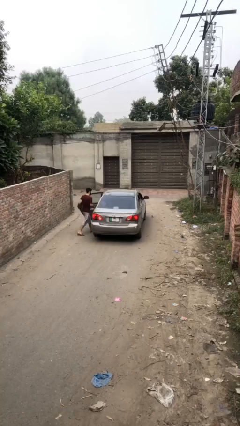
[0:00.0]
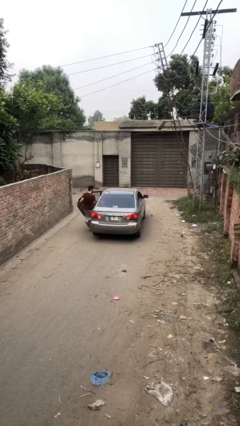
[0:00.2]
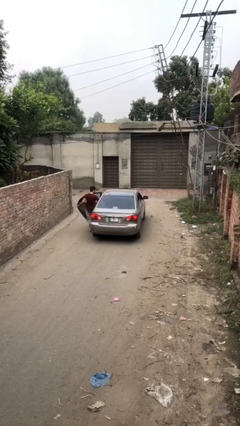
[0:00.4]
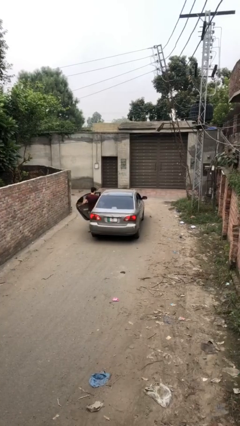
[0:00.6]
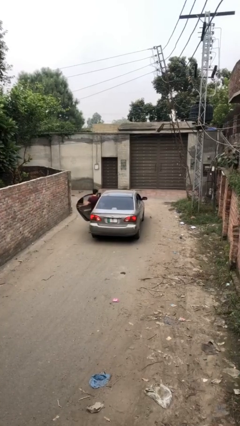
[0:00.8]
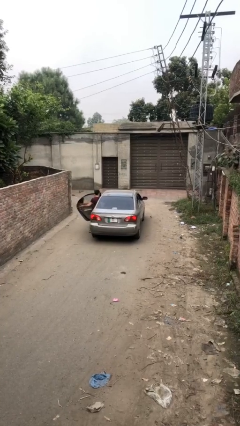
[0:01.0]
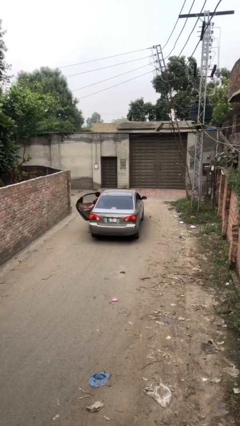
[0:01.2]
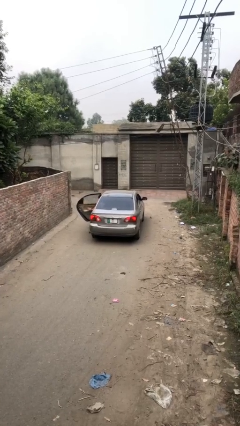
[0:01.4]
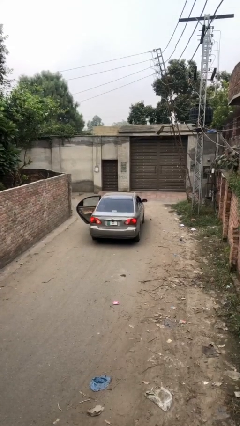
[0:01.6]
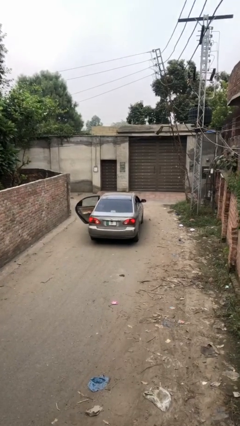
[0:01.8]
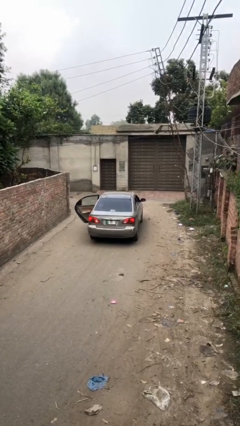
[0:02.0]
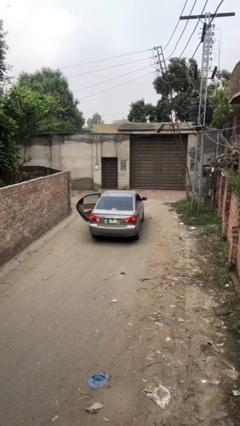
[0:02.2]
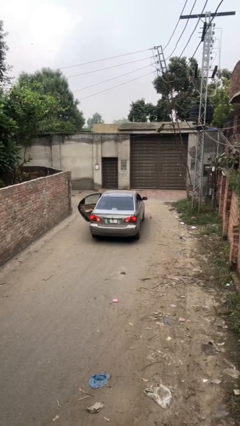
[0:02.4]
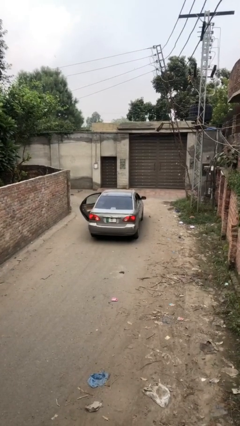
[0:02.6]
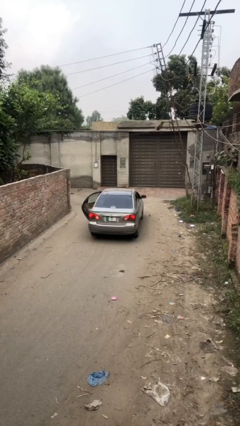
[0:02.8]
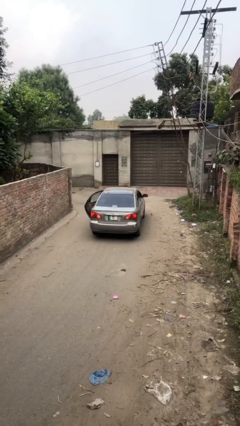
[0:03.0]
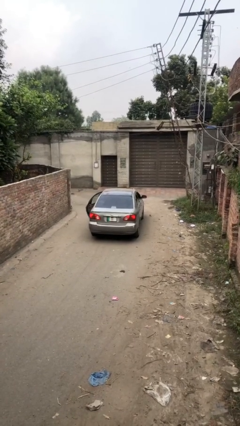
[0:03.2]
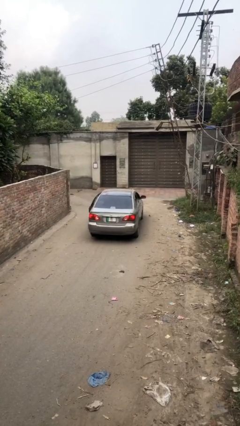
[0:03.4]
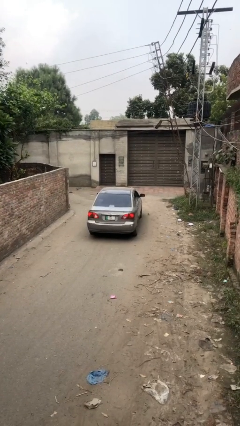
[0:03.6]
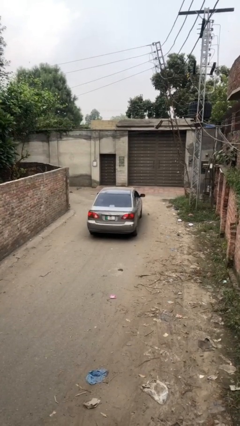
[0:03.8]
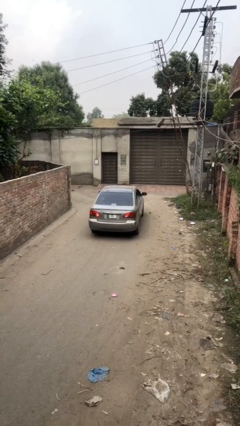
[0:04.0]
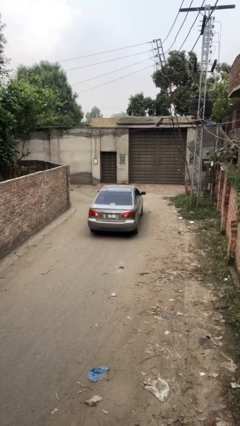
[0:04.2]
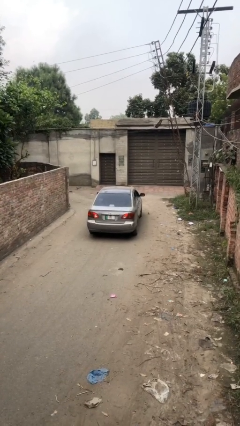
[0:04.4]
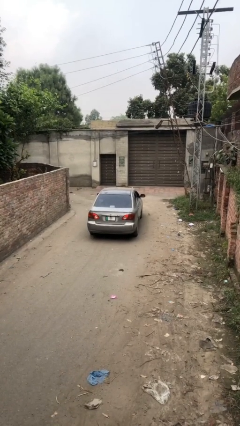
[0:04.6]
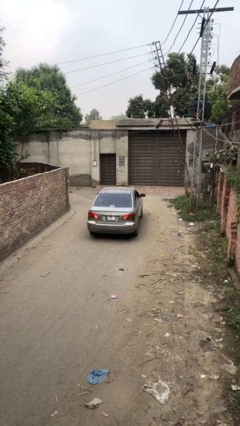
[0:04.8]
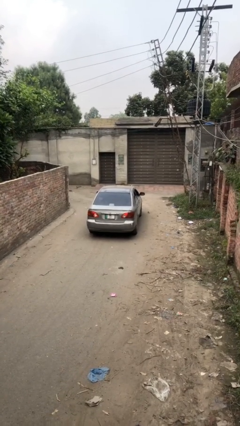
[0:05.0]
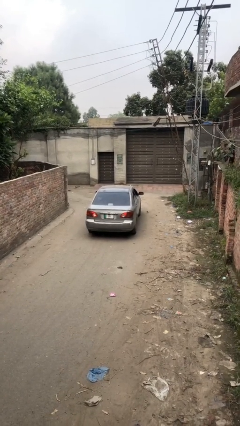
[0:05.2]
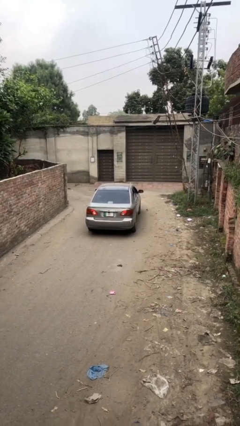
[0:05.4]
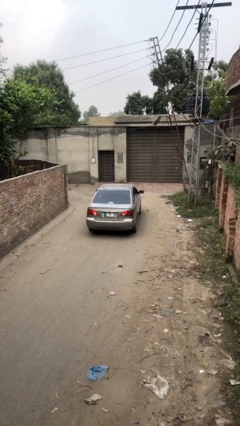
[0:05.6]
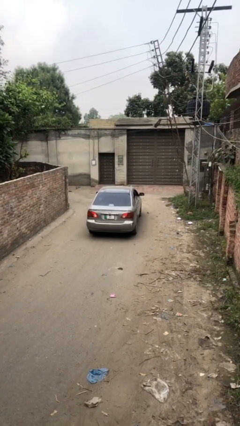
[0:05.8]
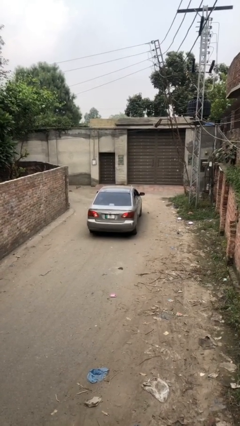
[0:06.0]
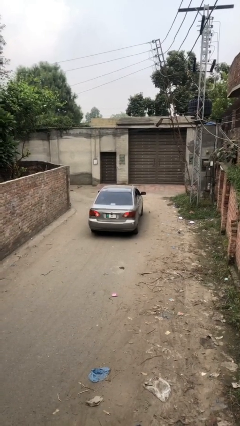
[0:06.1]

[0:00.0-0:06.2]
car picks up person

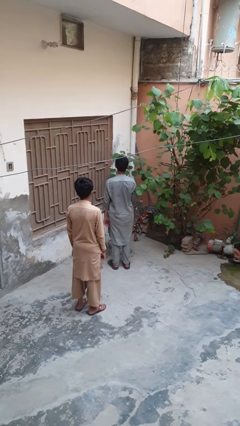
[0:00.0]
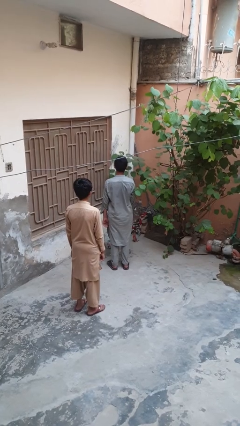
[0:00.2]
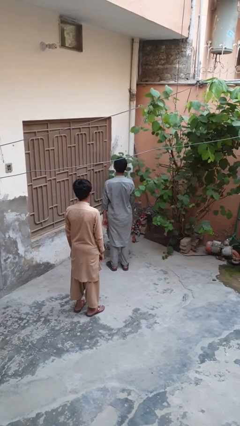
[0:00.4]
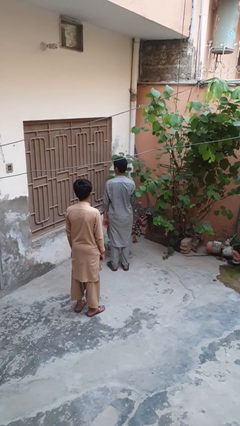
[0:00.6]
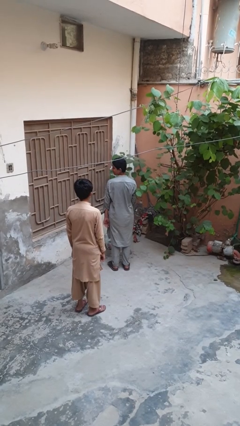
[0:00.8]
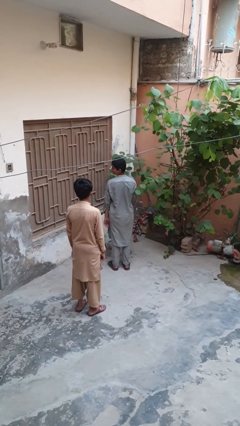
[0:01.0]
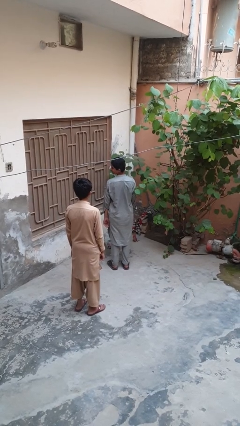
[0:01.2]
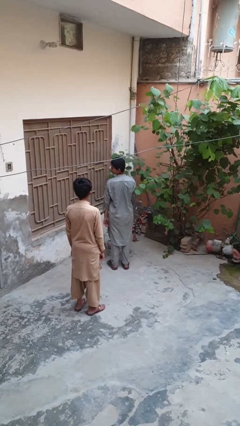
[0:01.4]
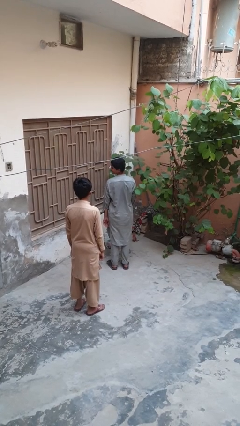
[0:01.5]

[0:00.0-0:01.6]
person looks over shoulder

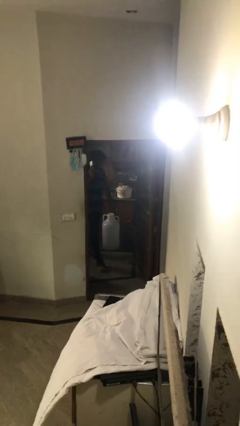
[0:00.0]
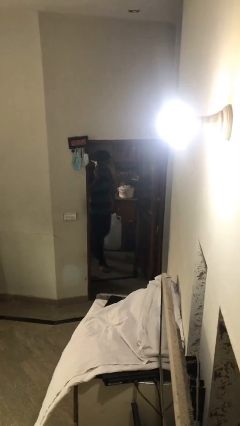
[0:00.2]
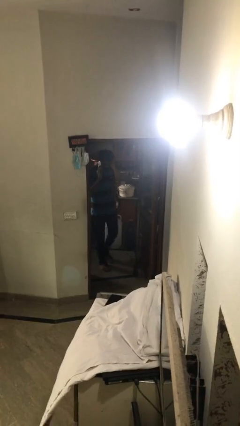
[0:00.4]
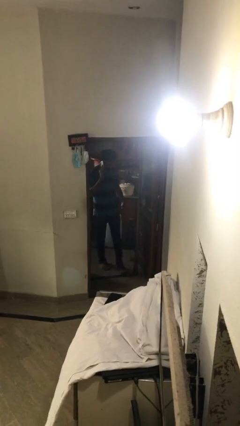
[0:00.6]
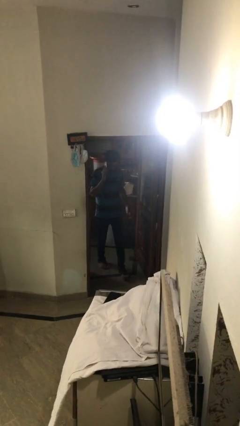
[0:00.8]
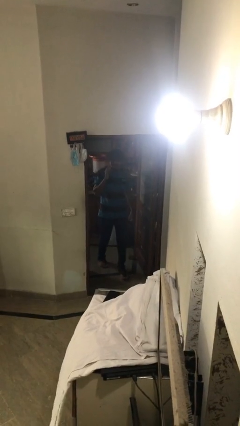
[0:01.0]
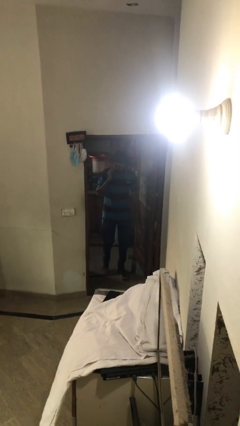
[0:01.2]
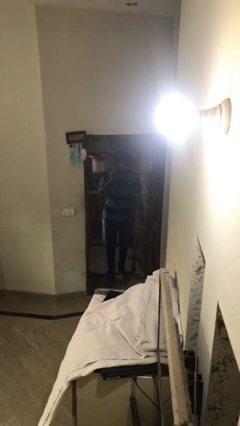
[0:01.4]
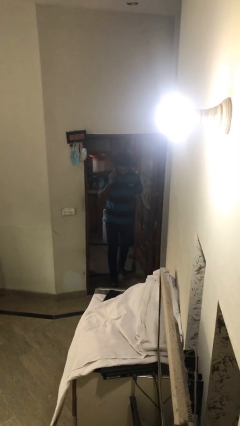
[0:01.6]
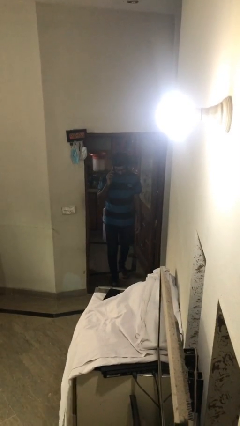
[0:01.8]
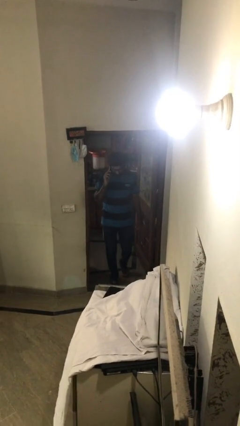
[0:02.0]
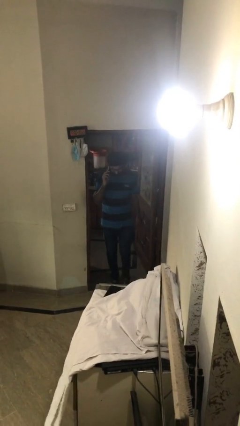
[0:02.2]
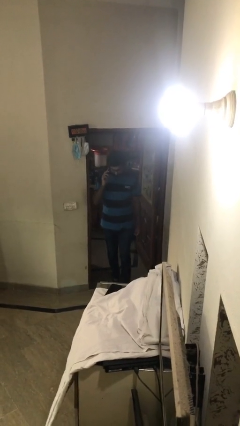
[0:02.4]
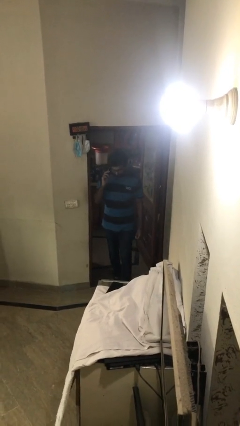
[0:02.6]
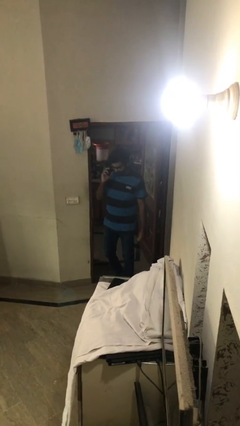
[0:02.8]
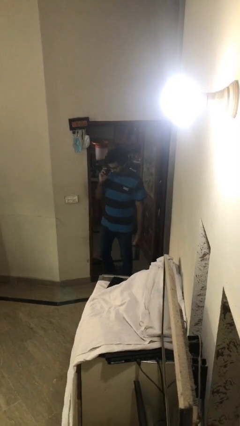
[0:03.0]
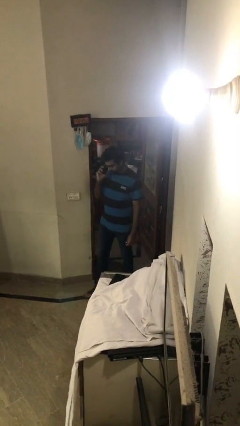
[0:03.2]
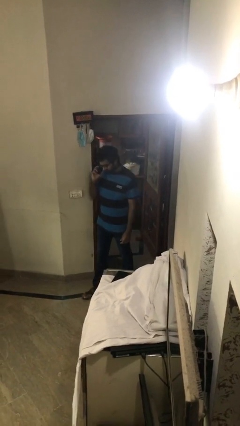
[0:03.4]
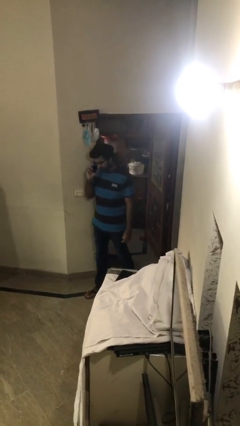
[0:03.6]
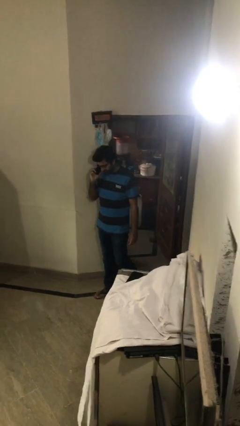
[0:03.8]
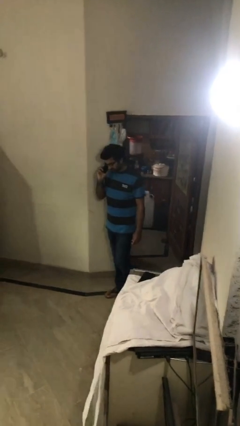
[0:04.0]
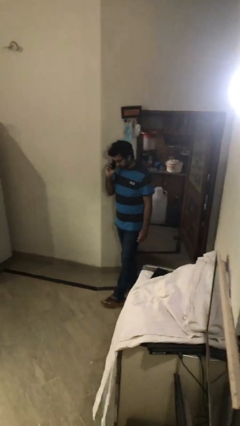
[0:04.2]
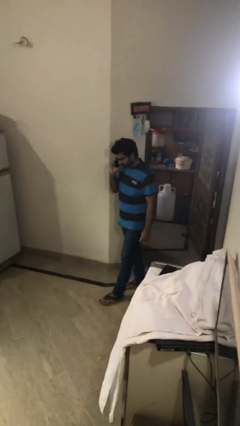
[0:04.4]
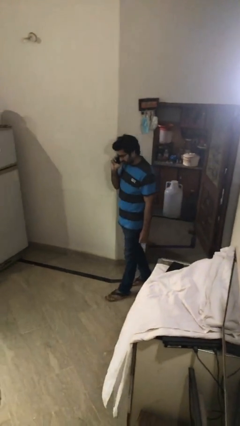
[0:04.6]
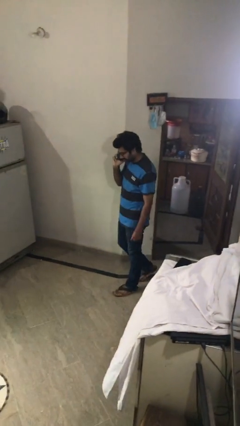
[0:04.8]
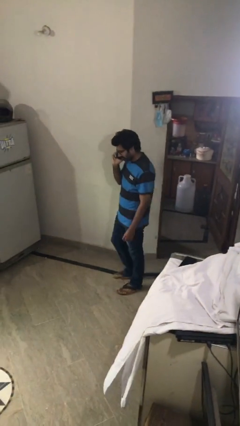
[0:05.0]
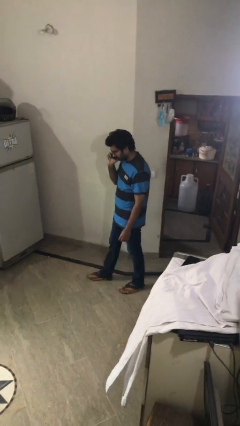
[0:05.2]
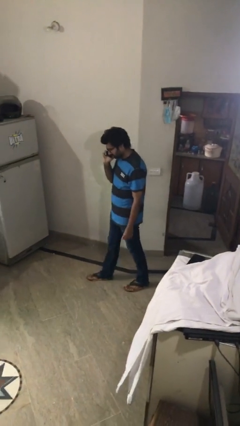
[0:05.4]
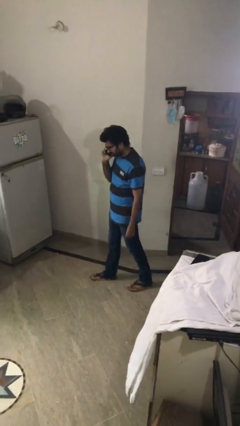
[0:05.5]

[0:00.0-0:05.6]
person enters scene through structure

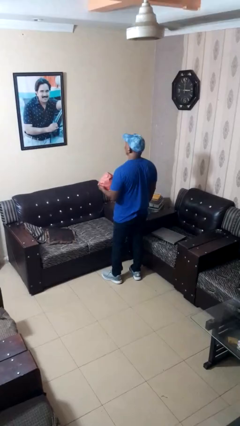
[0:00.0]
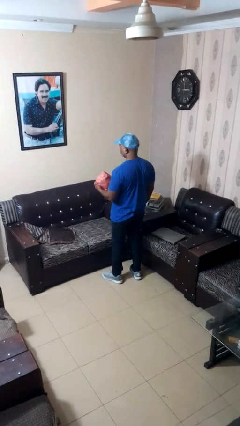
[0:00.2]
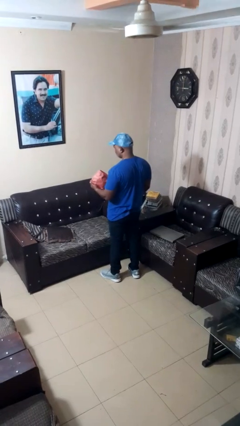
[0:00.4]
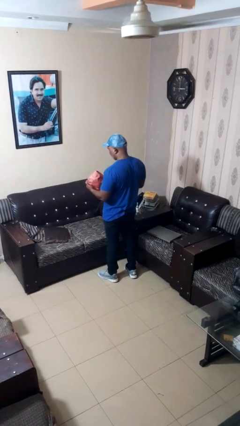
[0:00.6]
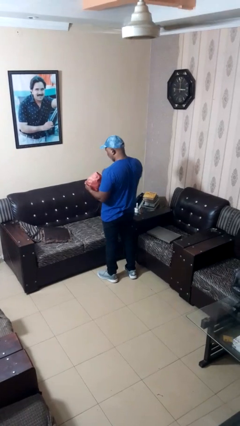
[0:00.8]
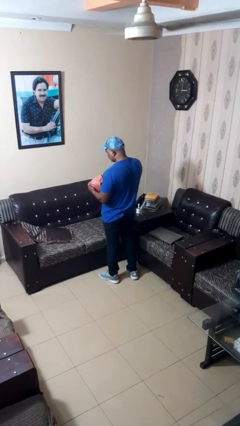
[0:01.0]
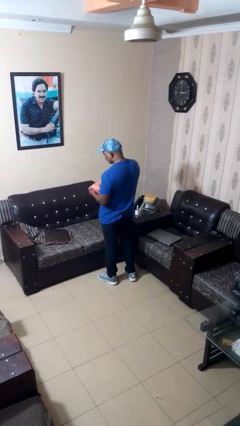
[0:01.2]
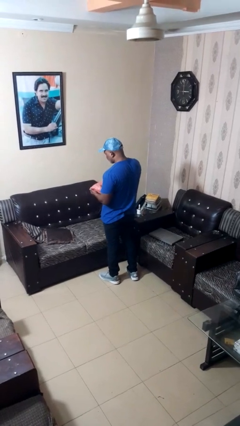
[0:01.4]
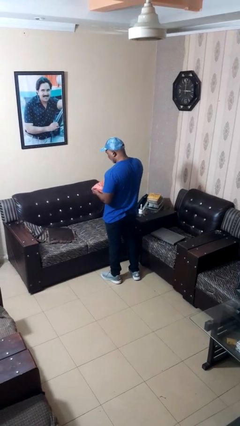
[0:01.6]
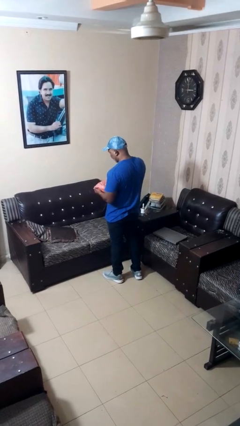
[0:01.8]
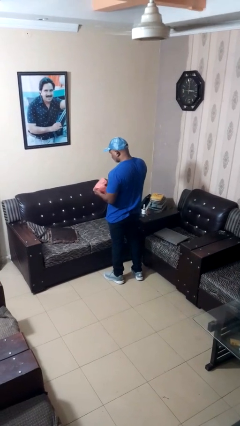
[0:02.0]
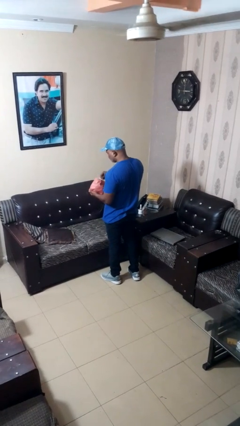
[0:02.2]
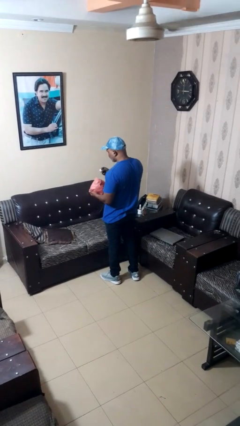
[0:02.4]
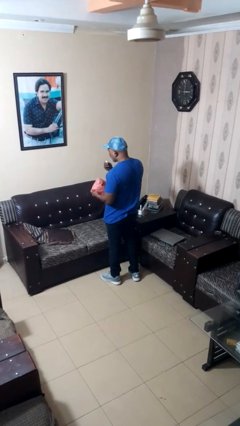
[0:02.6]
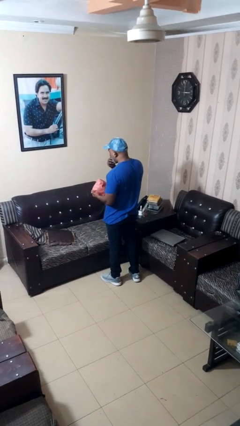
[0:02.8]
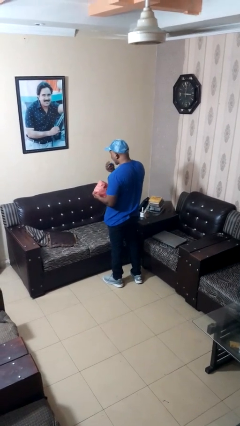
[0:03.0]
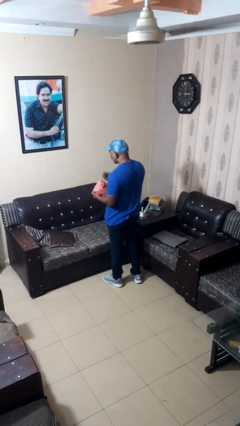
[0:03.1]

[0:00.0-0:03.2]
person eats snack from bag

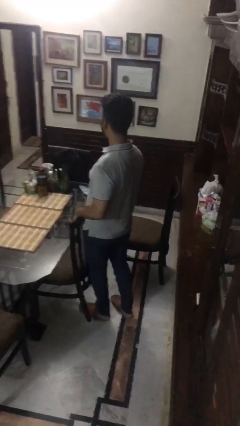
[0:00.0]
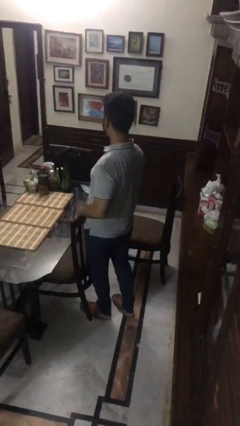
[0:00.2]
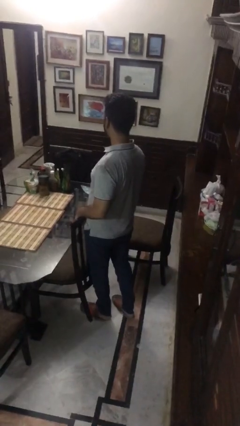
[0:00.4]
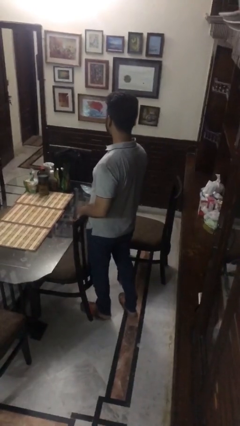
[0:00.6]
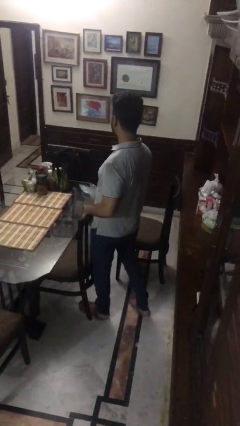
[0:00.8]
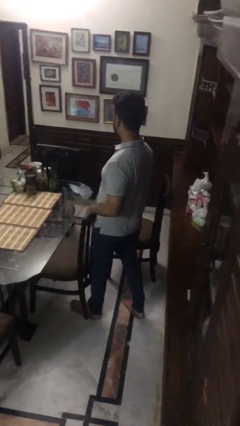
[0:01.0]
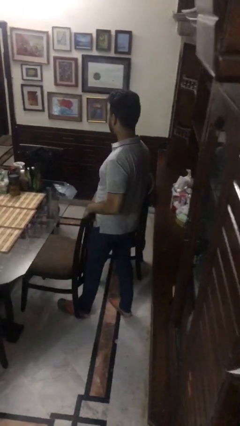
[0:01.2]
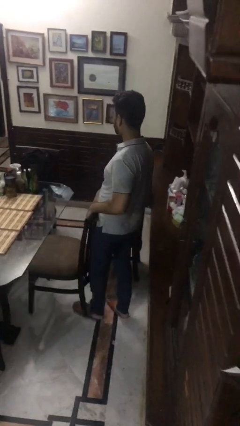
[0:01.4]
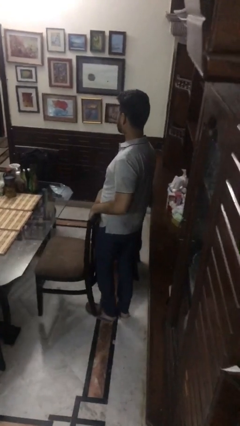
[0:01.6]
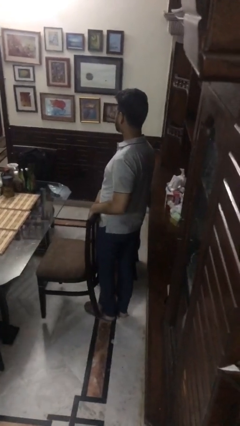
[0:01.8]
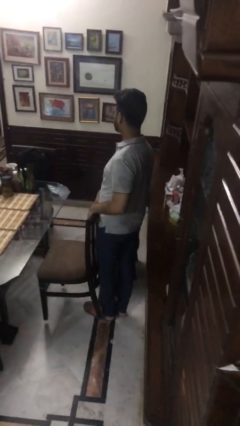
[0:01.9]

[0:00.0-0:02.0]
person pulls out chair
